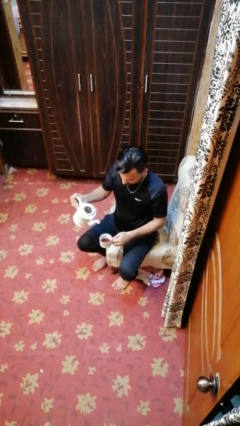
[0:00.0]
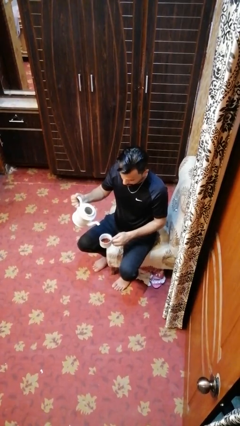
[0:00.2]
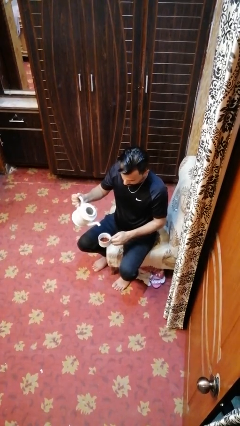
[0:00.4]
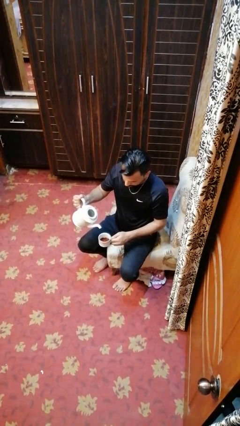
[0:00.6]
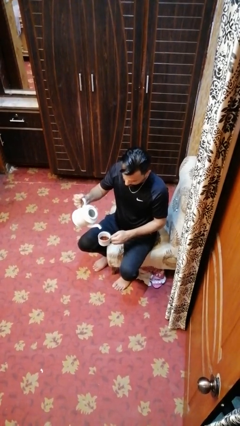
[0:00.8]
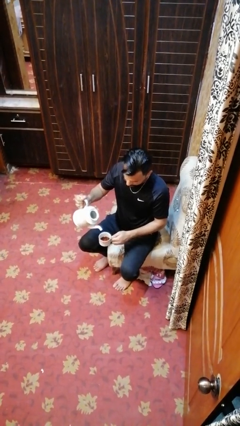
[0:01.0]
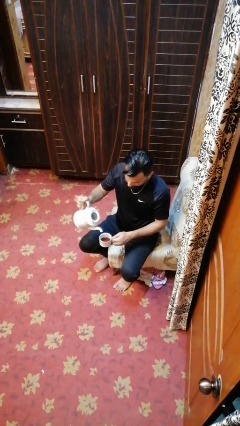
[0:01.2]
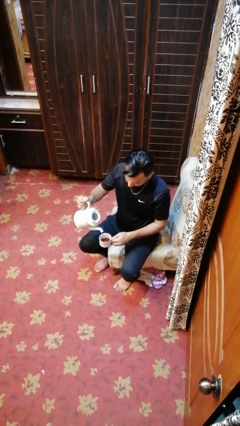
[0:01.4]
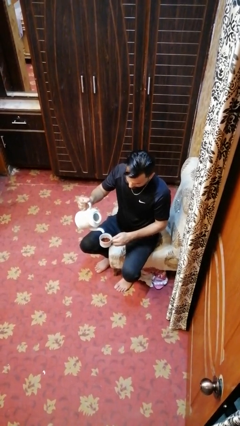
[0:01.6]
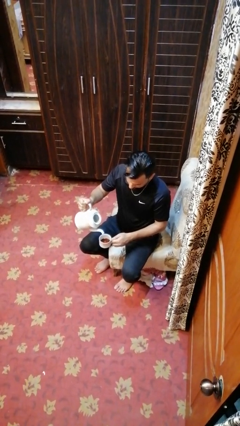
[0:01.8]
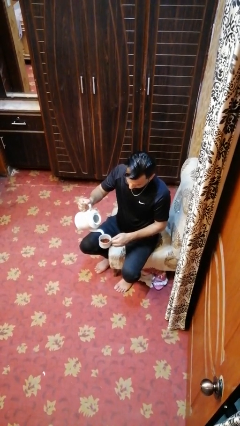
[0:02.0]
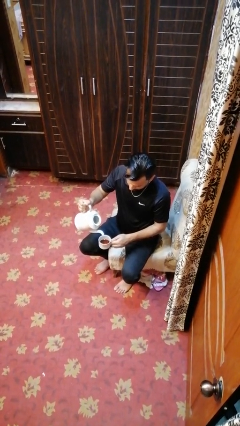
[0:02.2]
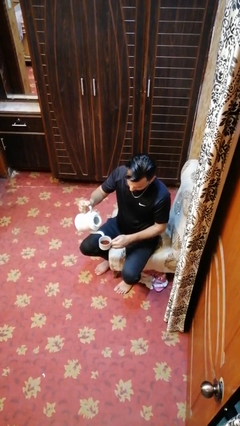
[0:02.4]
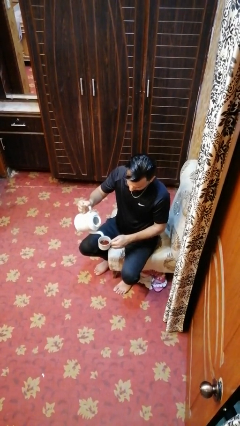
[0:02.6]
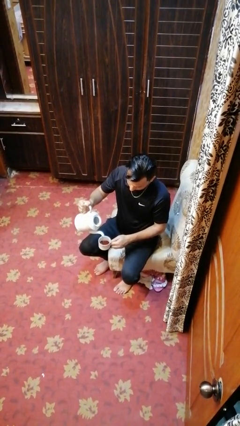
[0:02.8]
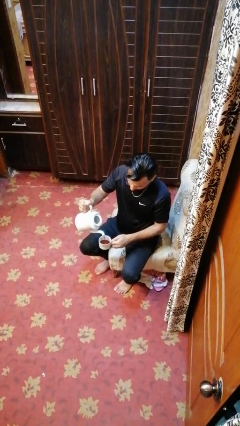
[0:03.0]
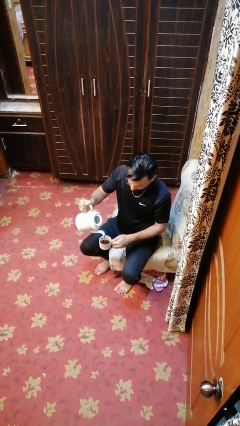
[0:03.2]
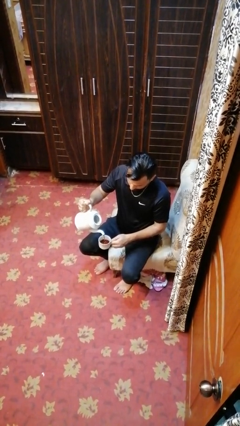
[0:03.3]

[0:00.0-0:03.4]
person pours coffee into mug

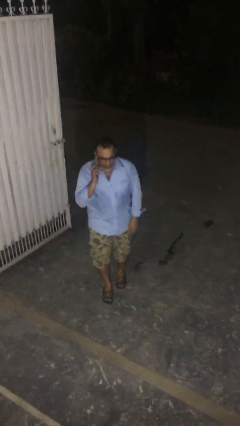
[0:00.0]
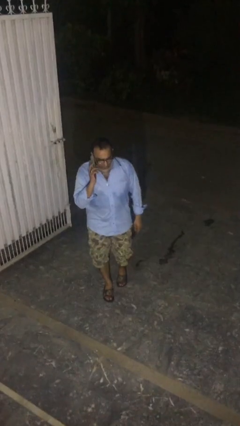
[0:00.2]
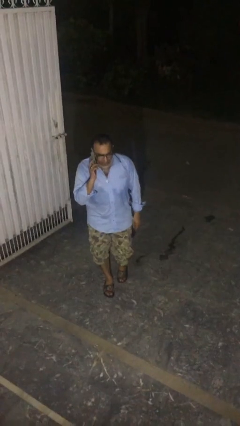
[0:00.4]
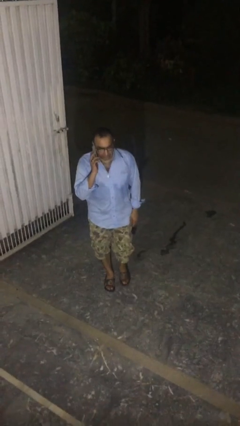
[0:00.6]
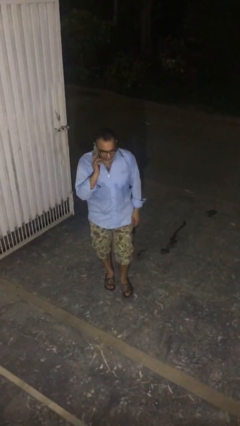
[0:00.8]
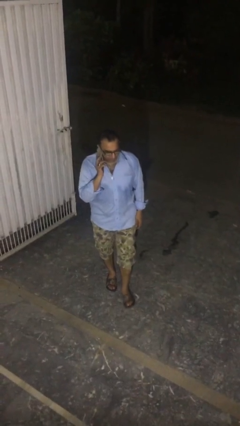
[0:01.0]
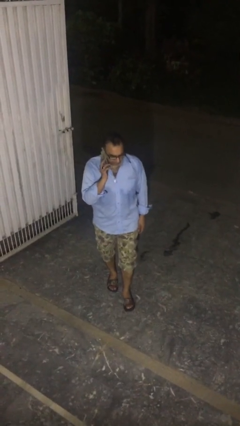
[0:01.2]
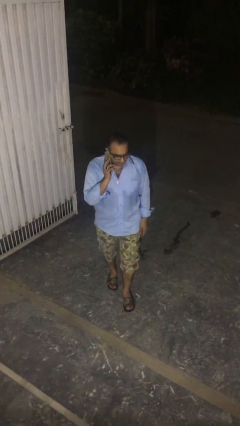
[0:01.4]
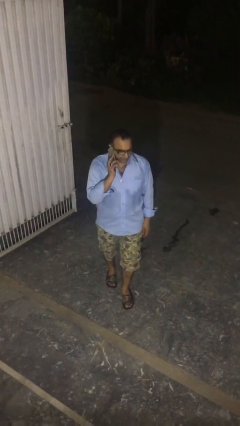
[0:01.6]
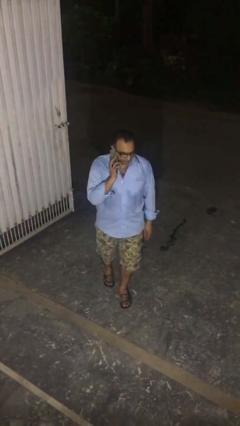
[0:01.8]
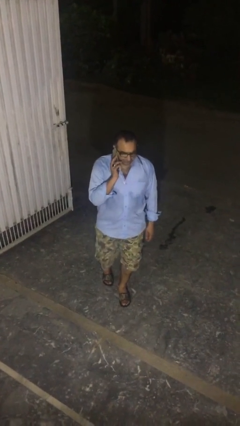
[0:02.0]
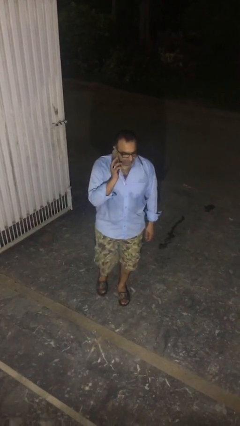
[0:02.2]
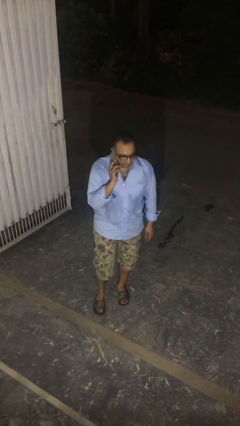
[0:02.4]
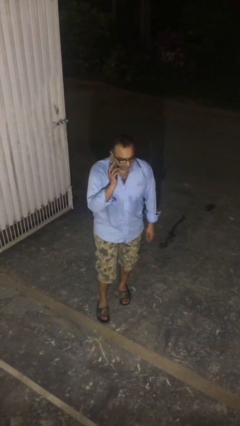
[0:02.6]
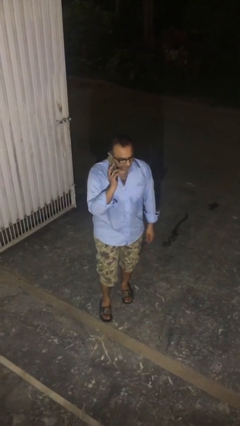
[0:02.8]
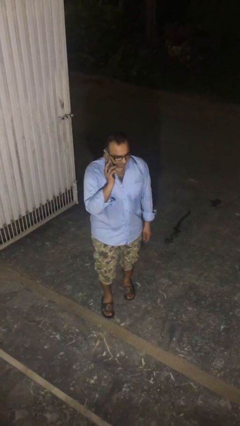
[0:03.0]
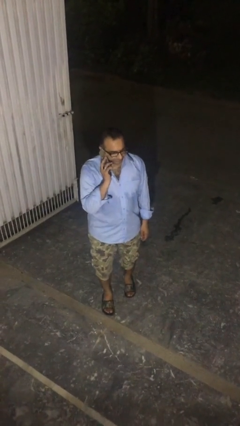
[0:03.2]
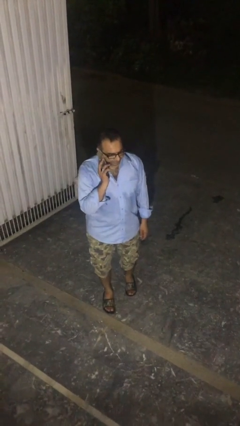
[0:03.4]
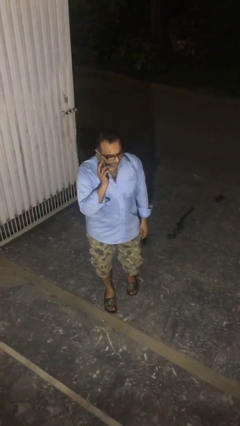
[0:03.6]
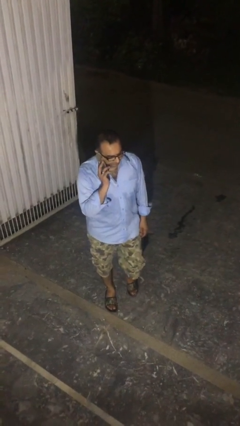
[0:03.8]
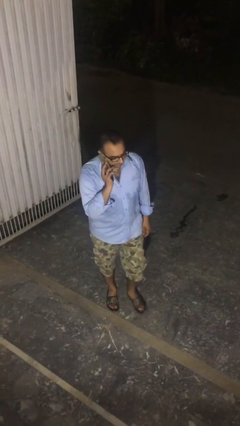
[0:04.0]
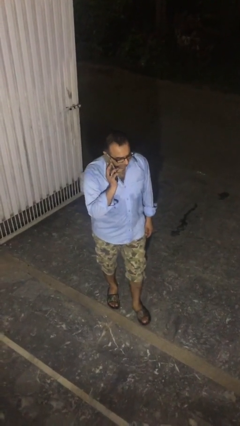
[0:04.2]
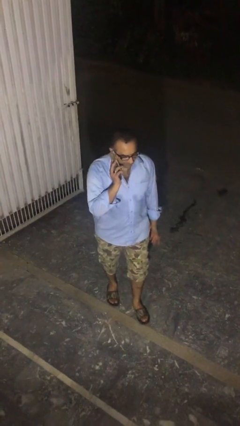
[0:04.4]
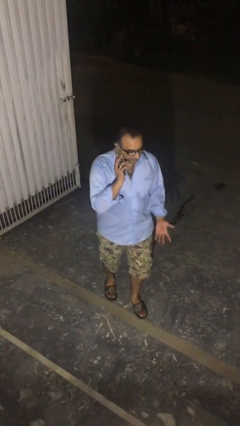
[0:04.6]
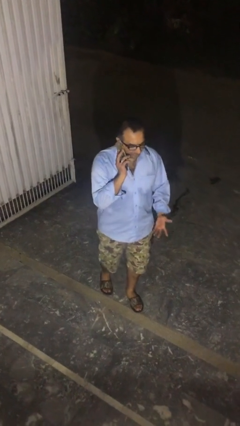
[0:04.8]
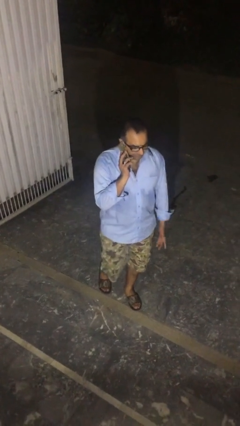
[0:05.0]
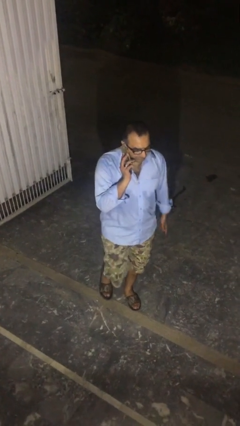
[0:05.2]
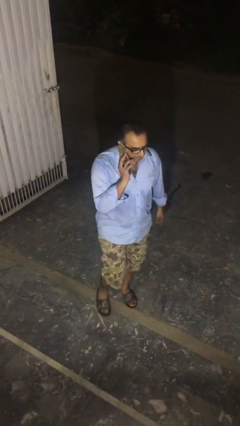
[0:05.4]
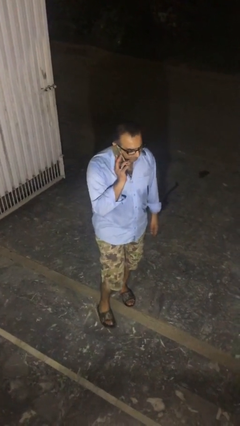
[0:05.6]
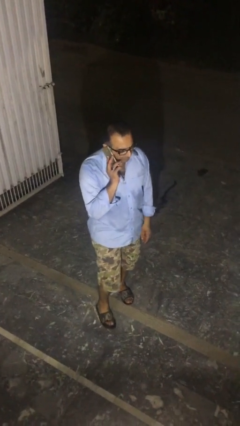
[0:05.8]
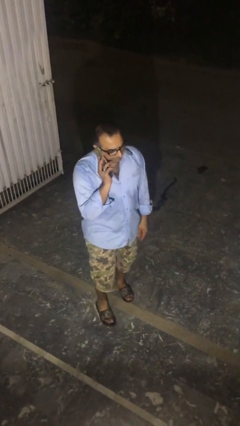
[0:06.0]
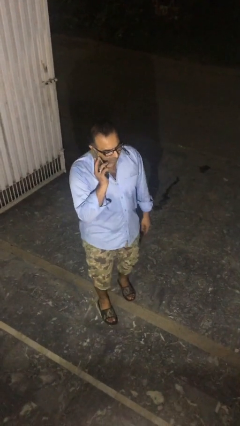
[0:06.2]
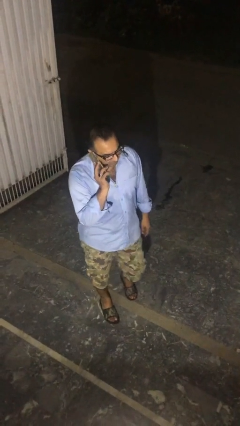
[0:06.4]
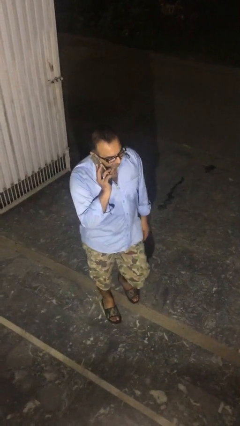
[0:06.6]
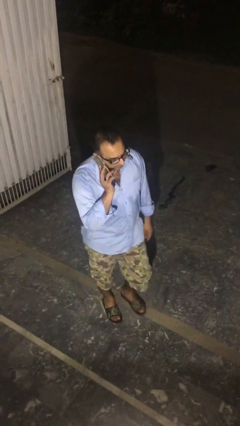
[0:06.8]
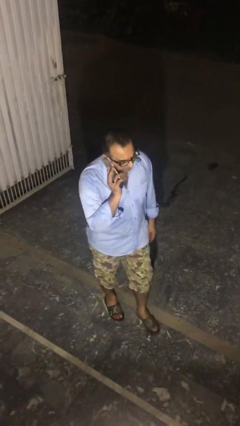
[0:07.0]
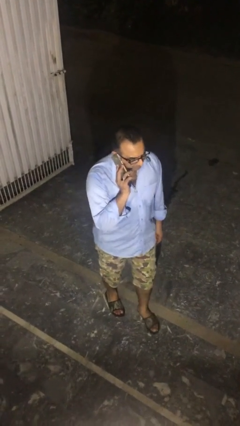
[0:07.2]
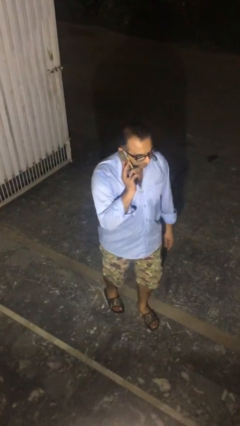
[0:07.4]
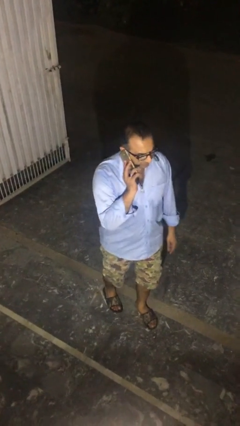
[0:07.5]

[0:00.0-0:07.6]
person talks on phone

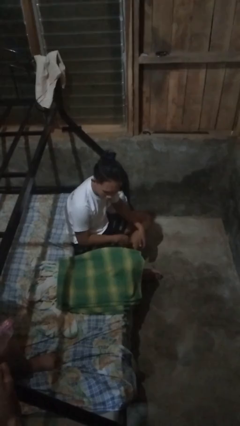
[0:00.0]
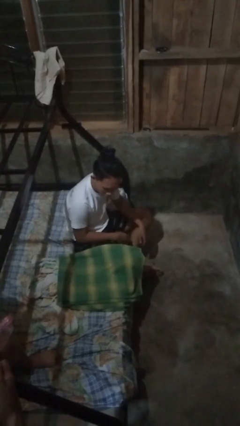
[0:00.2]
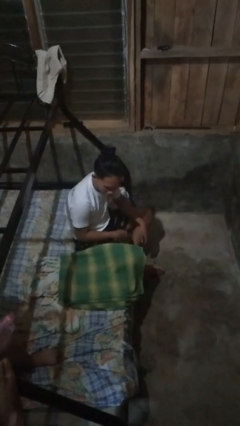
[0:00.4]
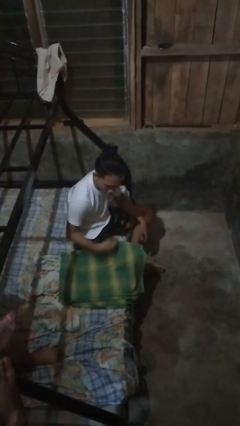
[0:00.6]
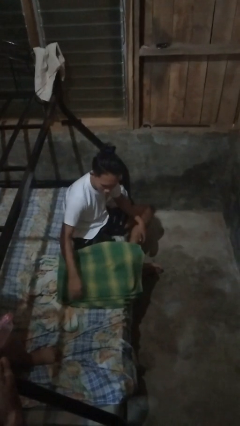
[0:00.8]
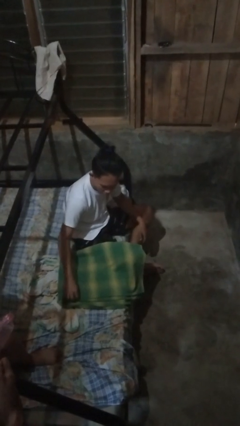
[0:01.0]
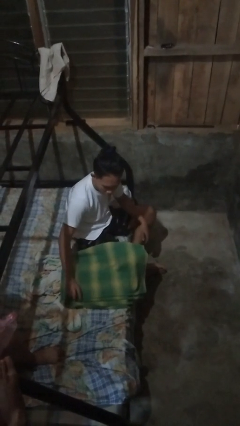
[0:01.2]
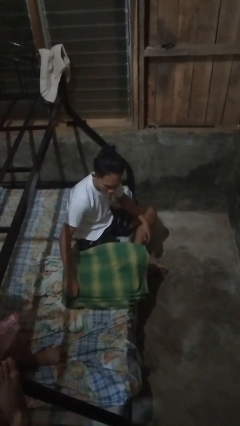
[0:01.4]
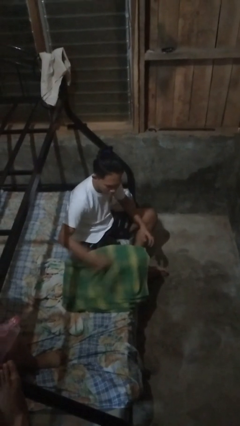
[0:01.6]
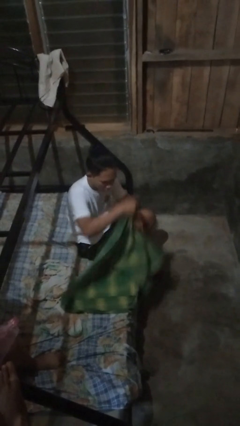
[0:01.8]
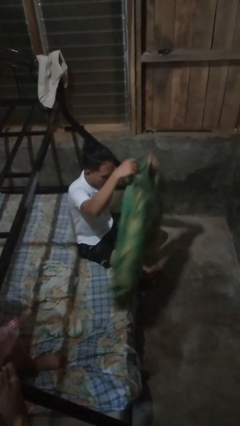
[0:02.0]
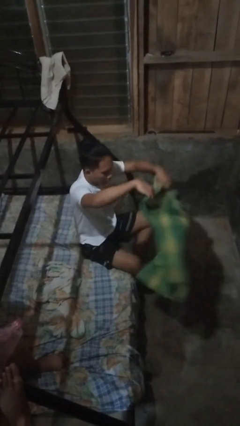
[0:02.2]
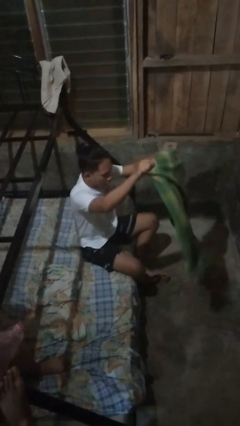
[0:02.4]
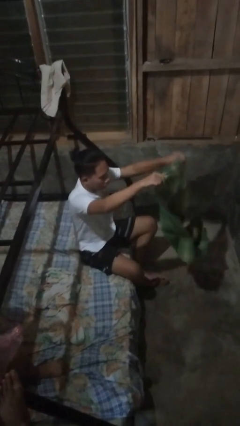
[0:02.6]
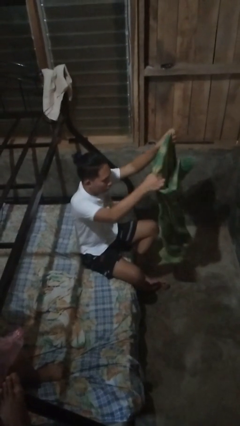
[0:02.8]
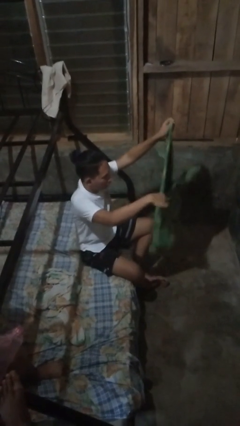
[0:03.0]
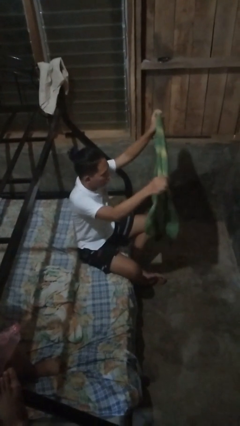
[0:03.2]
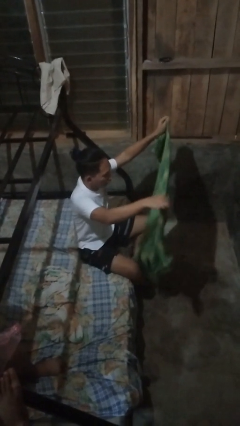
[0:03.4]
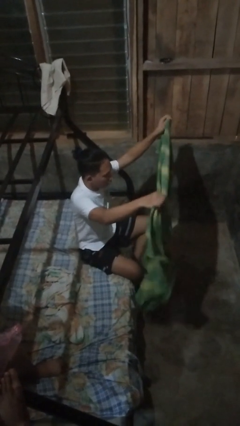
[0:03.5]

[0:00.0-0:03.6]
person unfolds blanket

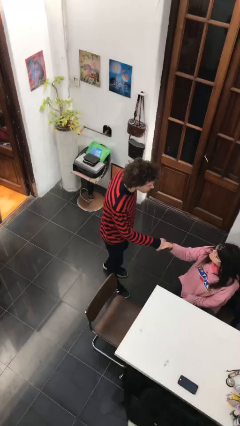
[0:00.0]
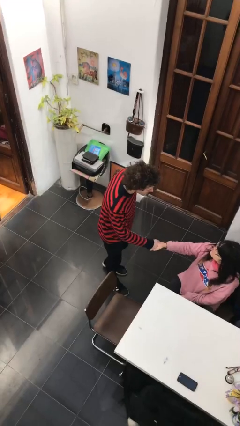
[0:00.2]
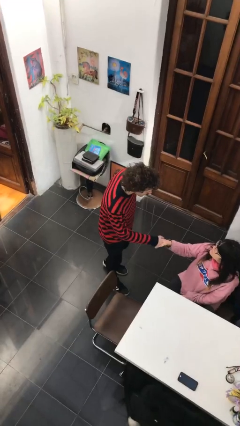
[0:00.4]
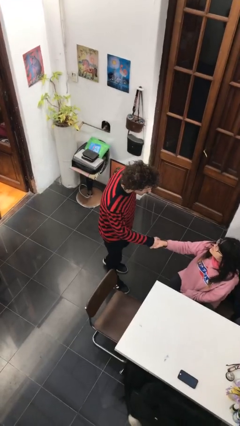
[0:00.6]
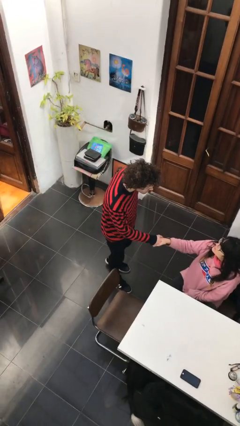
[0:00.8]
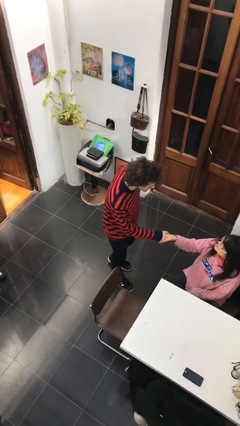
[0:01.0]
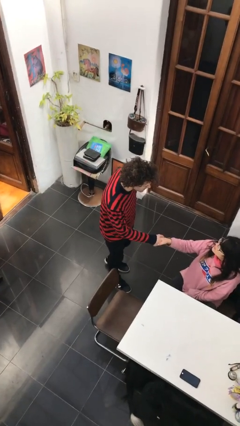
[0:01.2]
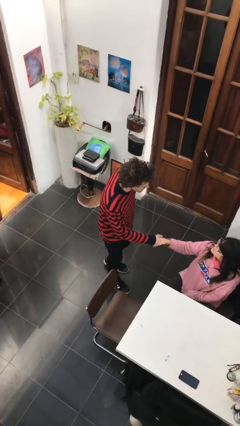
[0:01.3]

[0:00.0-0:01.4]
person shakes hand

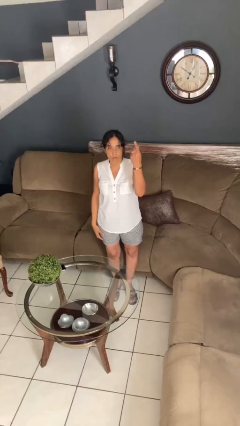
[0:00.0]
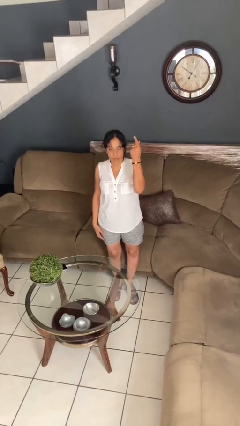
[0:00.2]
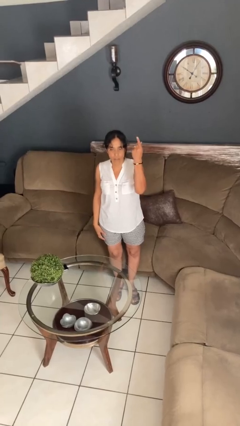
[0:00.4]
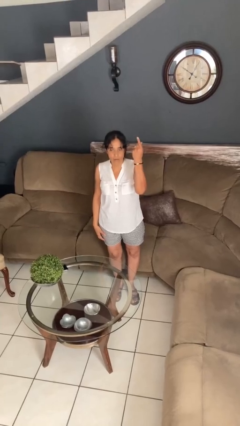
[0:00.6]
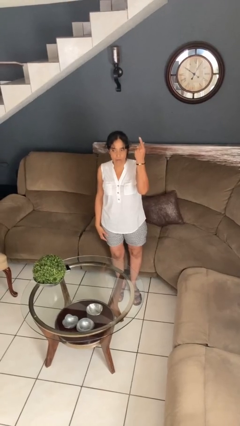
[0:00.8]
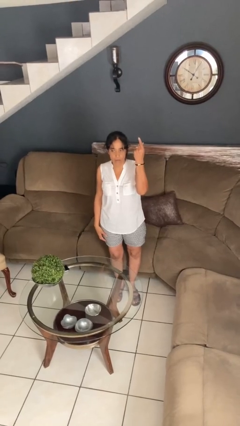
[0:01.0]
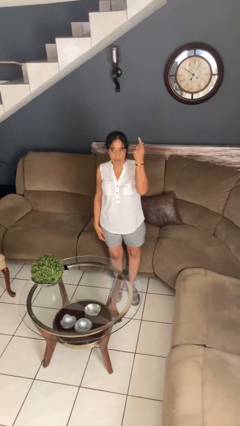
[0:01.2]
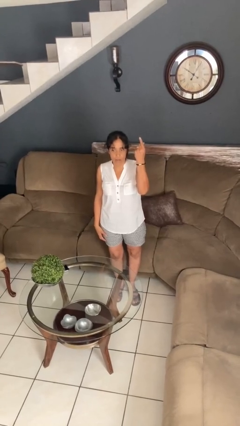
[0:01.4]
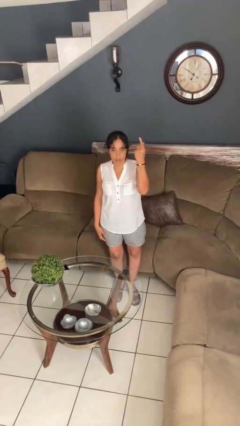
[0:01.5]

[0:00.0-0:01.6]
person gestures number one

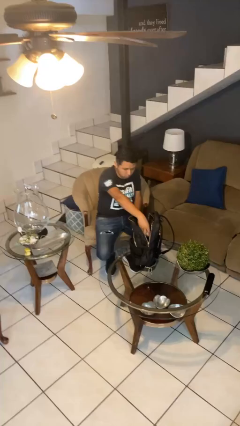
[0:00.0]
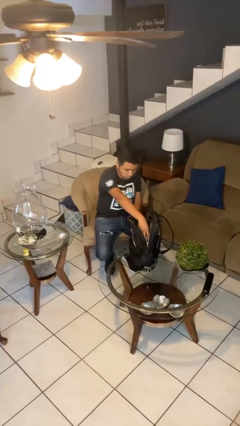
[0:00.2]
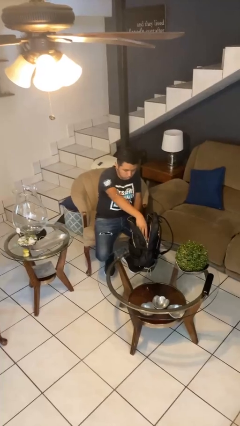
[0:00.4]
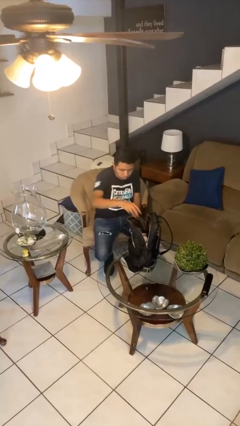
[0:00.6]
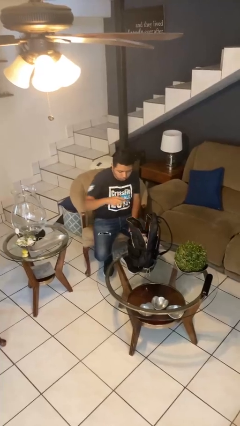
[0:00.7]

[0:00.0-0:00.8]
person puts object into backpack
